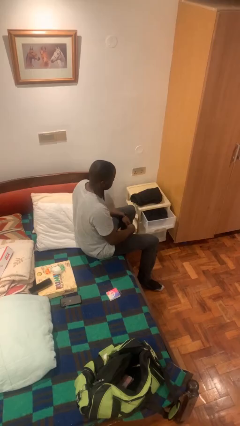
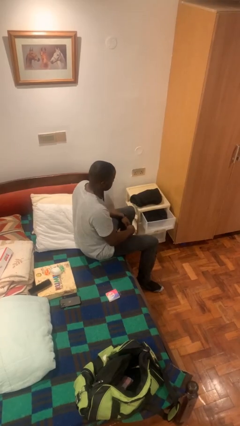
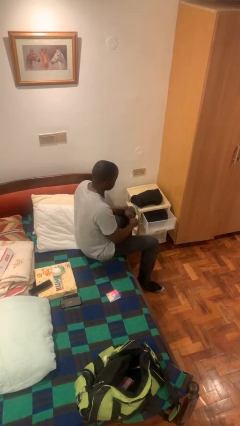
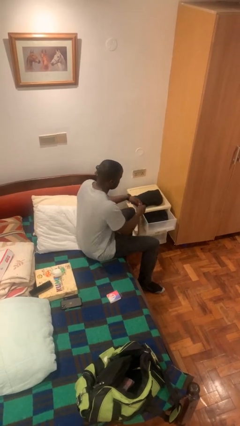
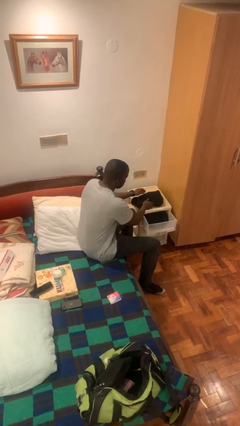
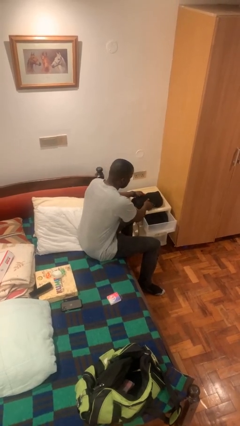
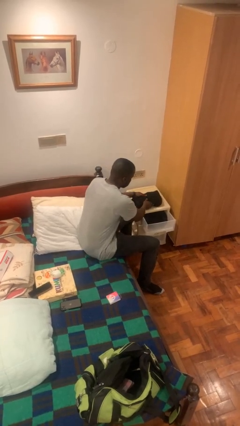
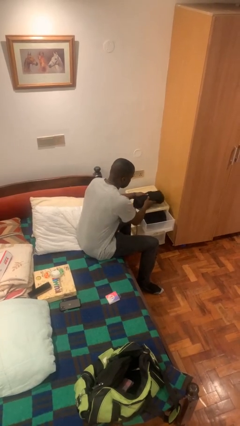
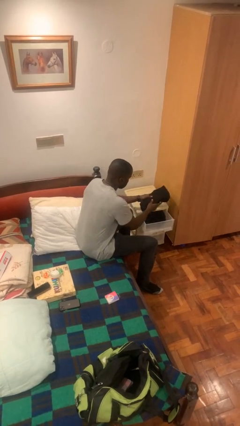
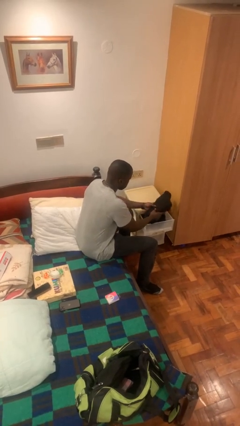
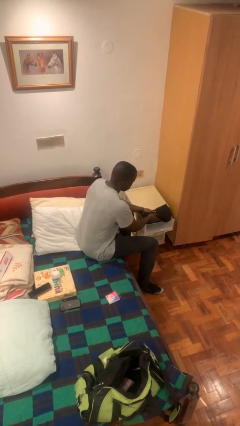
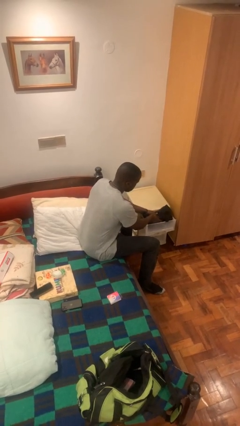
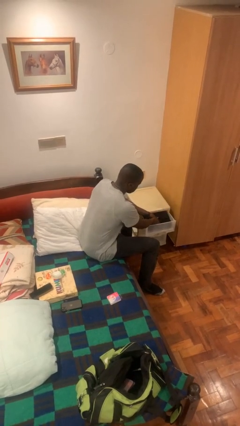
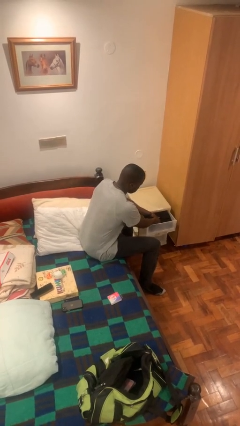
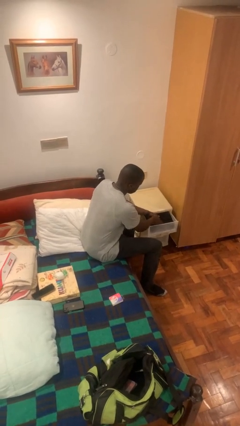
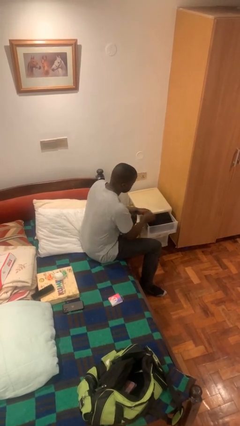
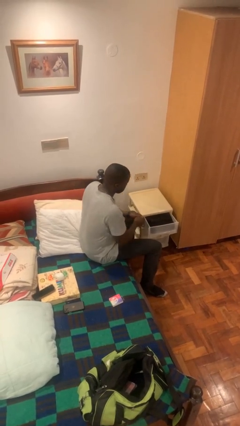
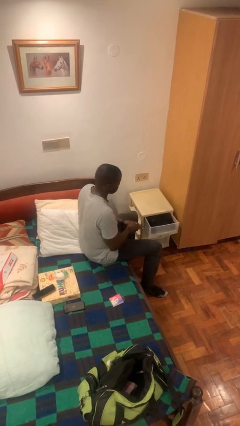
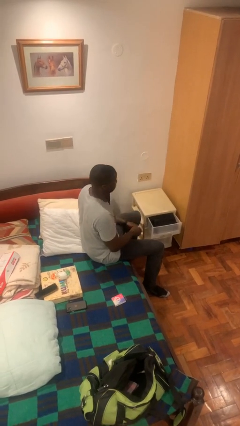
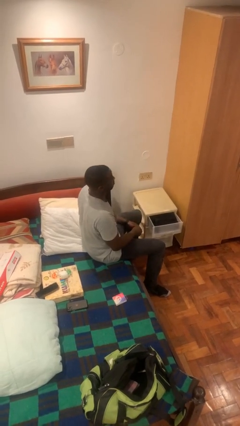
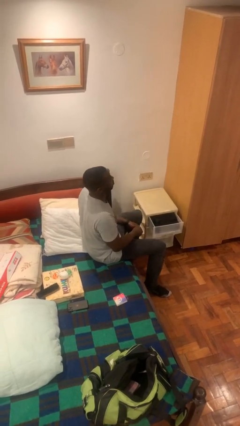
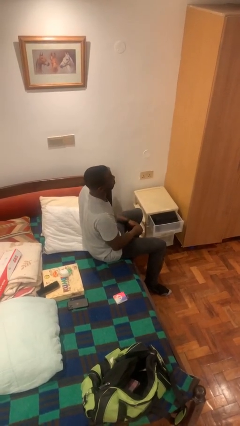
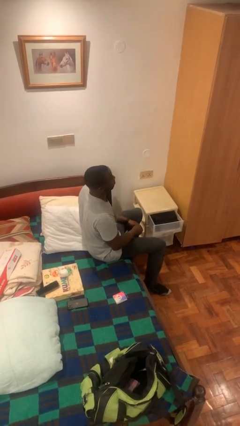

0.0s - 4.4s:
person puts clothes into dresser

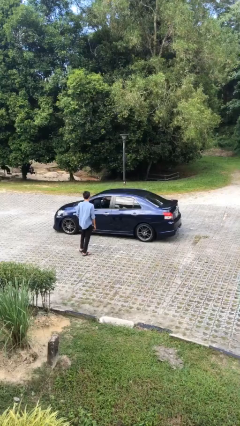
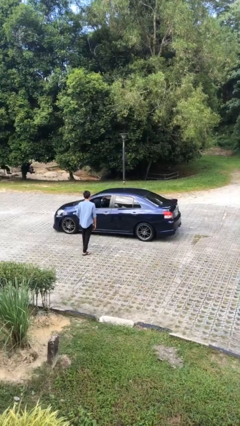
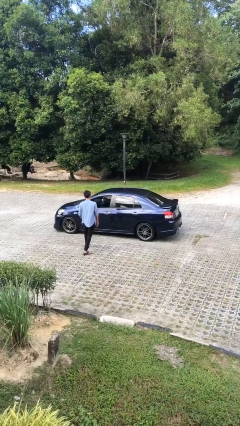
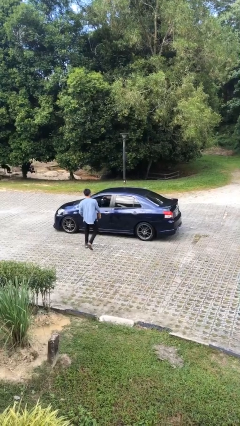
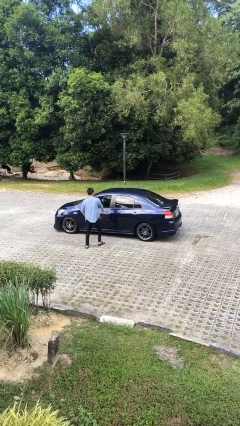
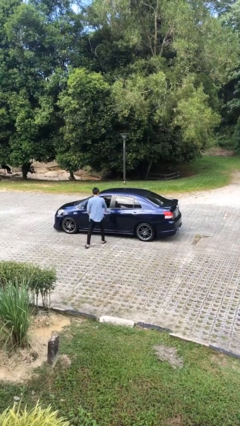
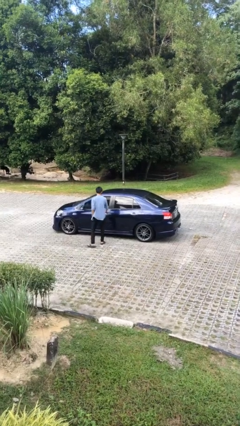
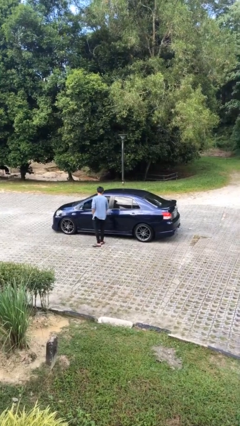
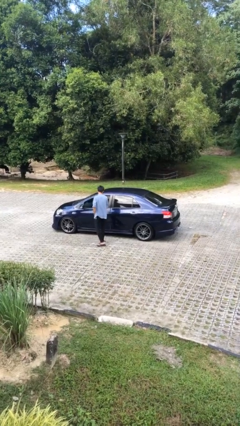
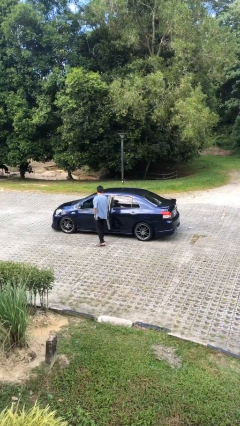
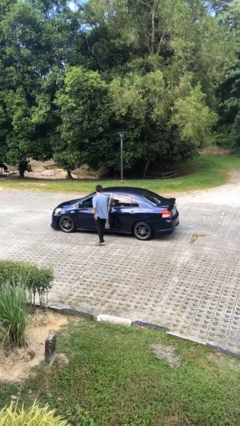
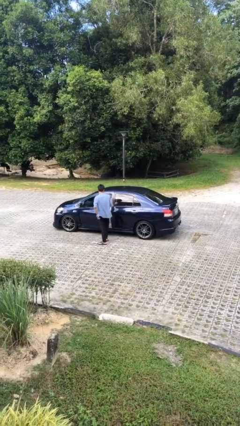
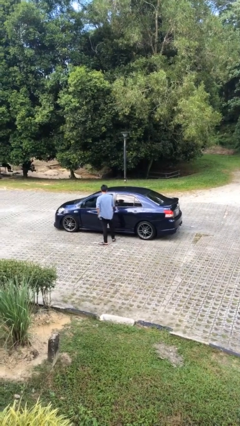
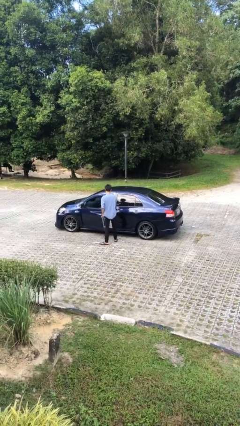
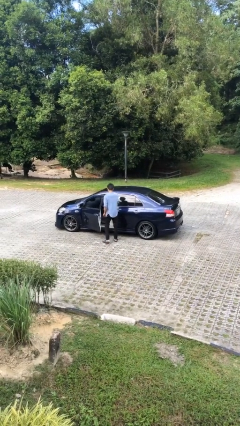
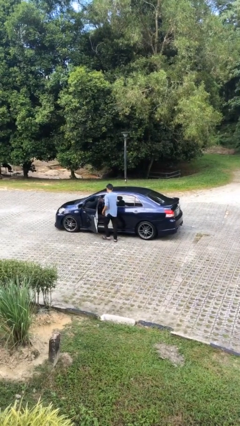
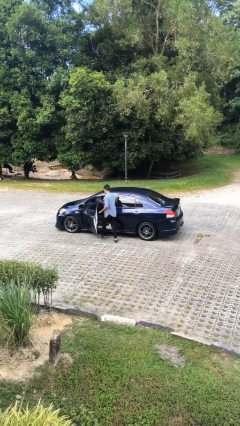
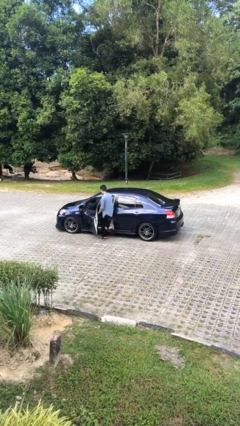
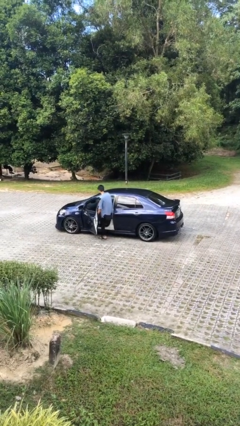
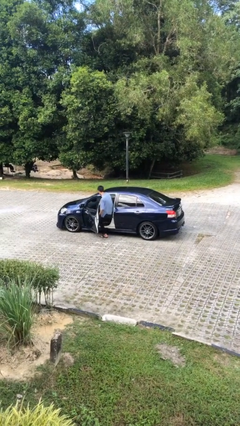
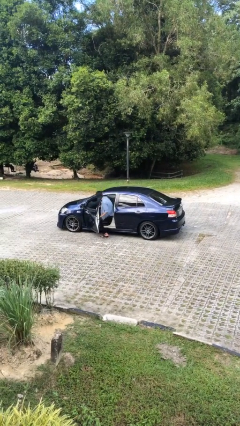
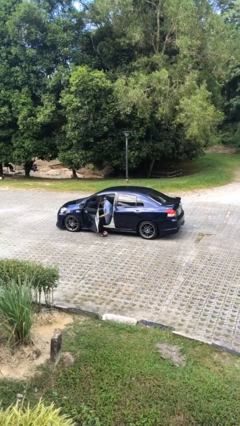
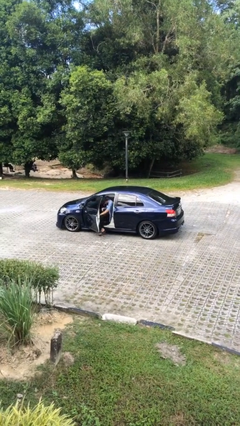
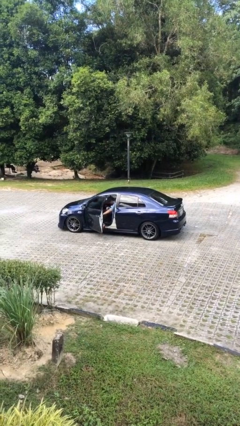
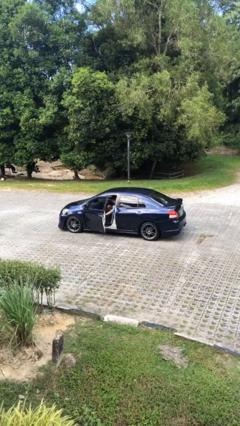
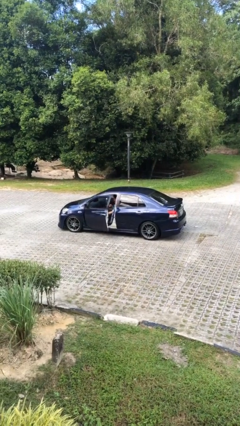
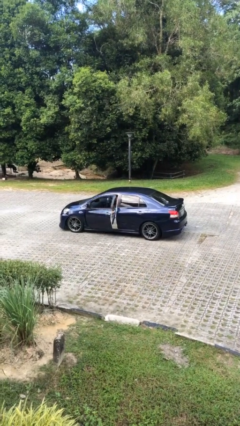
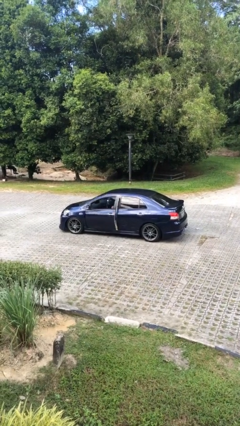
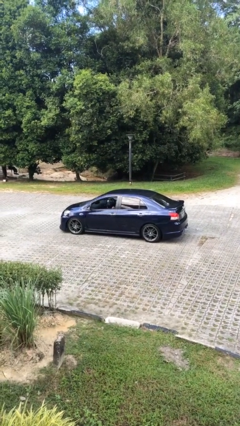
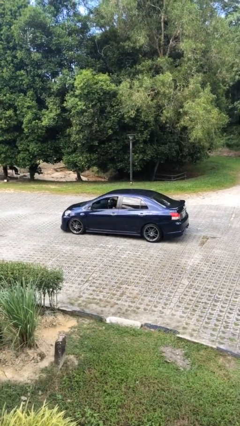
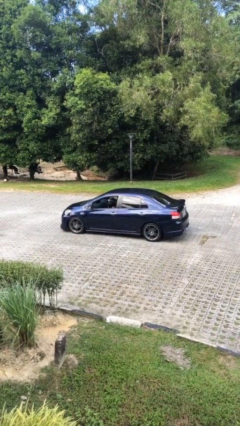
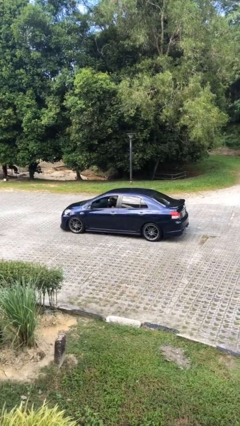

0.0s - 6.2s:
car picks up person

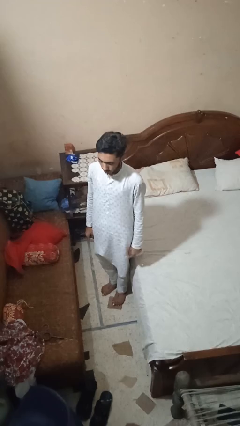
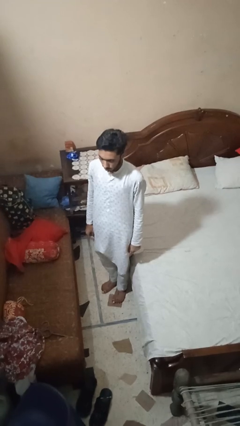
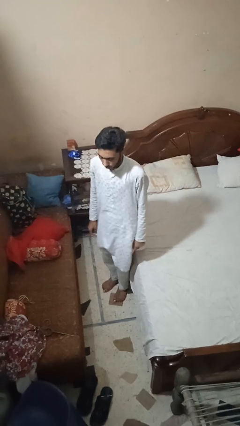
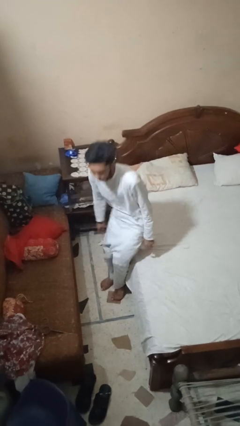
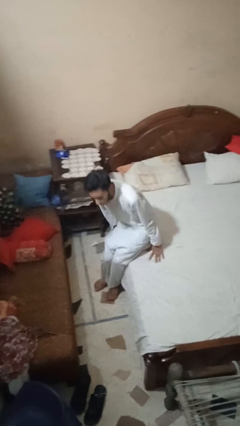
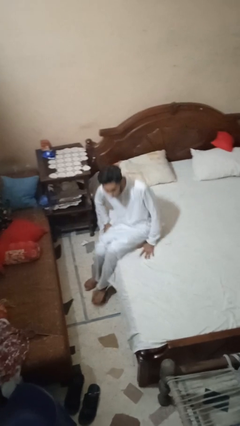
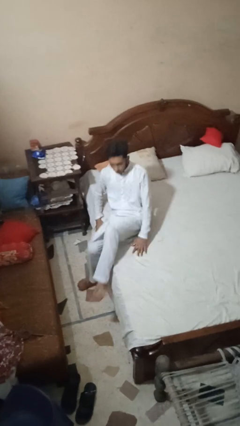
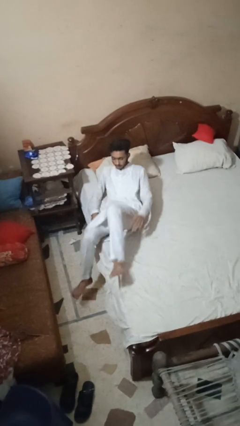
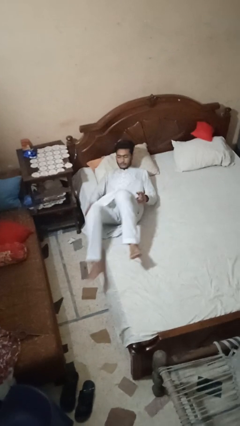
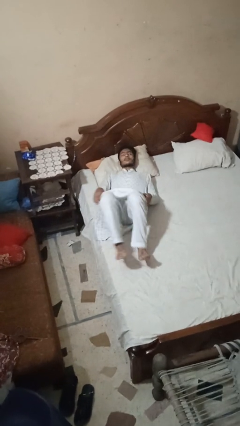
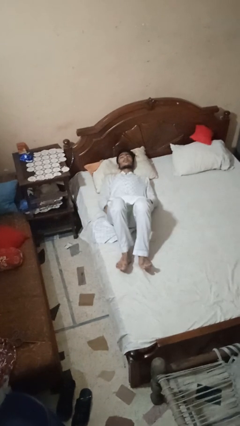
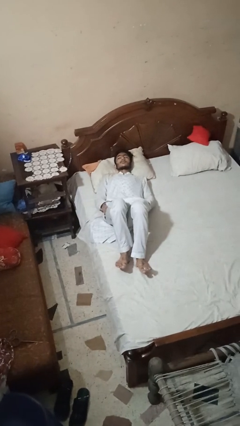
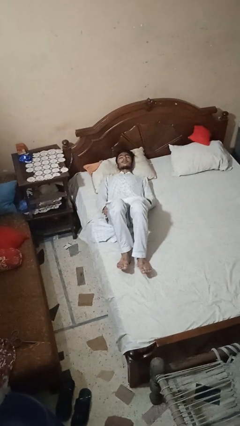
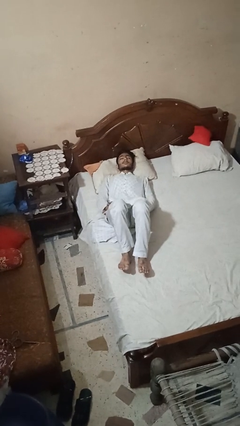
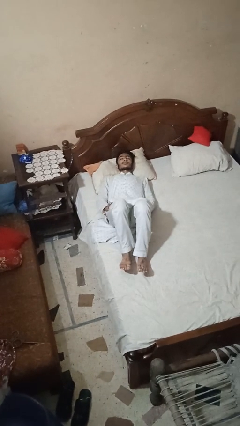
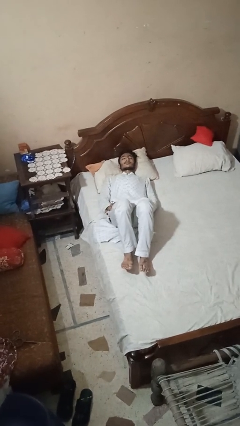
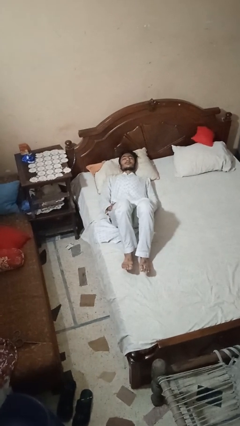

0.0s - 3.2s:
person lies down on bed

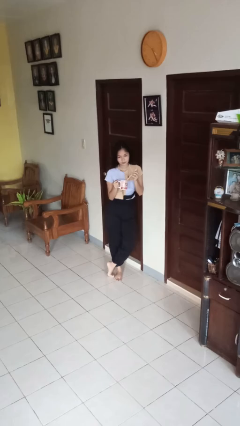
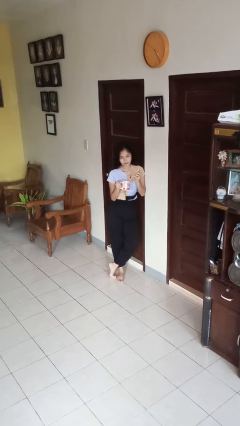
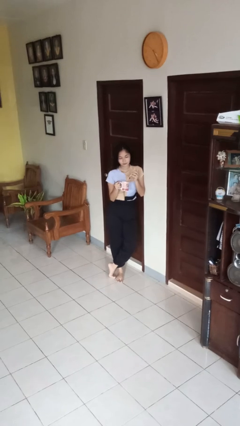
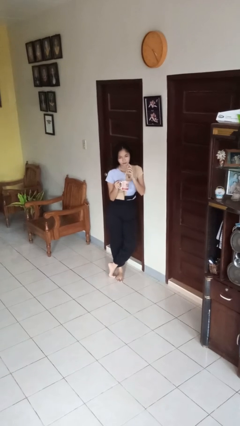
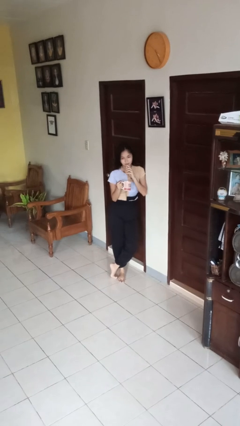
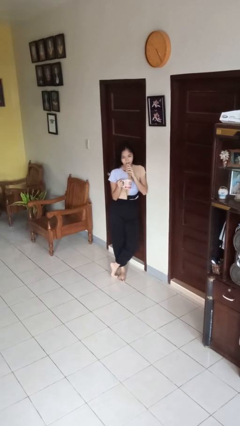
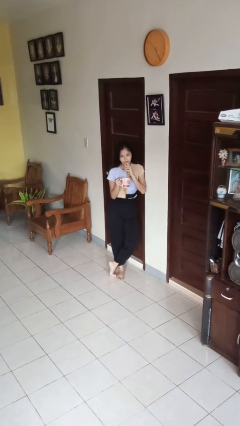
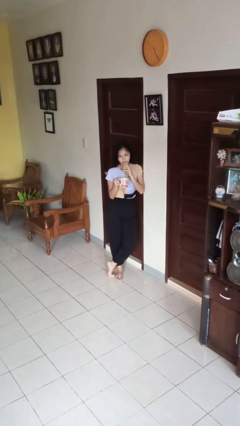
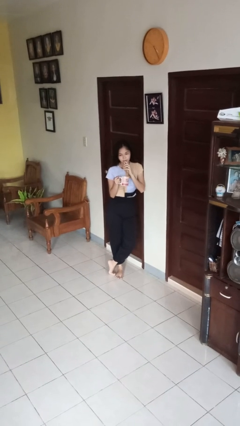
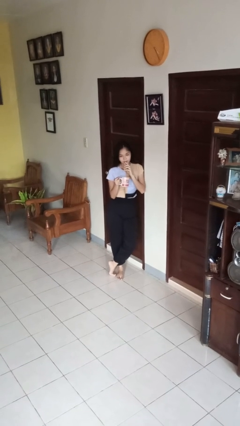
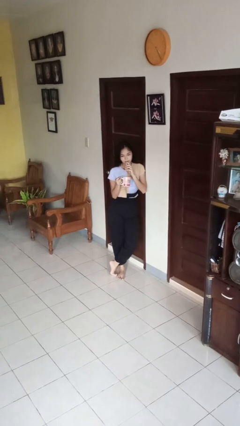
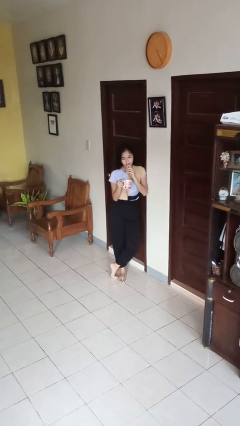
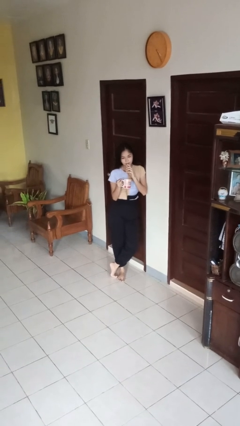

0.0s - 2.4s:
person drinks from straw

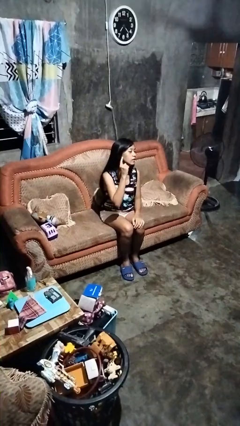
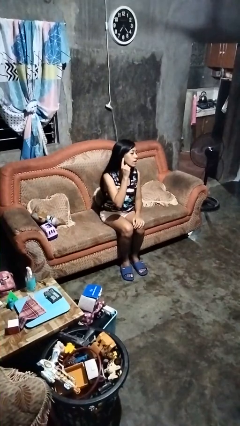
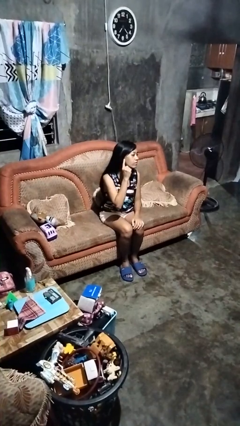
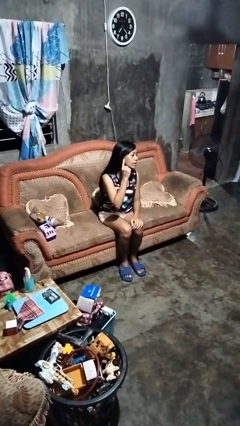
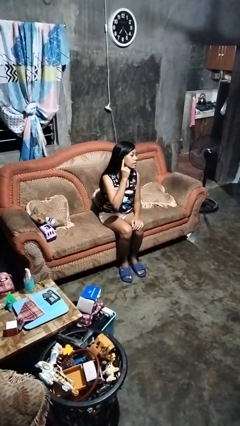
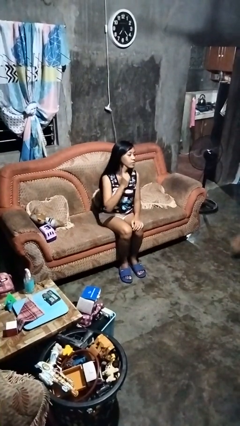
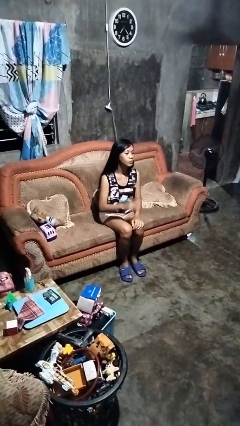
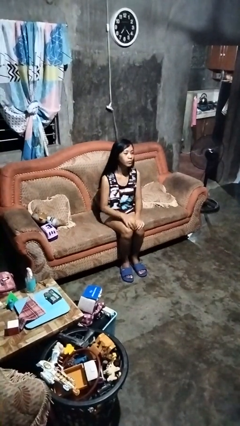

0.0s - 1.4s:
person gestures listen closely
